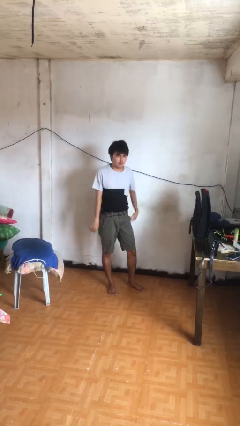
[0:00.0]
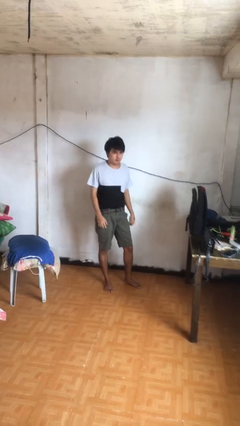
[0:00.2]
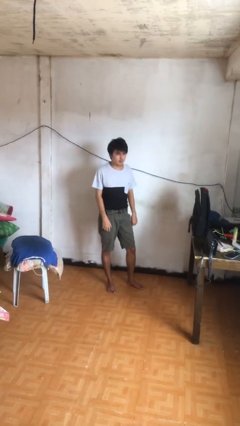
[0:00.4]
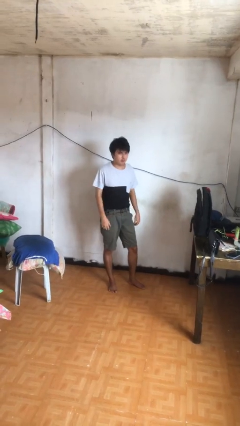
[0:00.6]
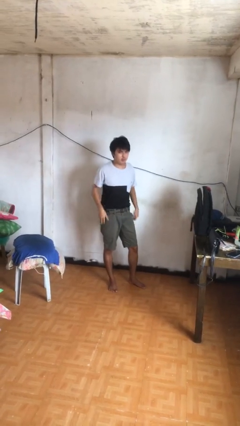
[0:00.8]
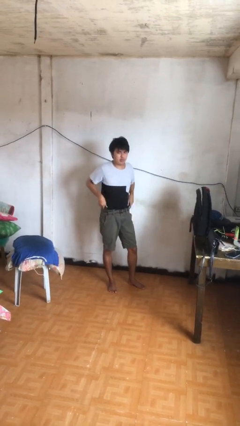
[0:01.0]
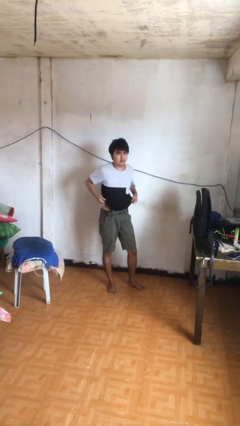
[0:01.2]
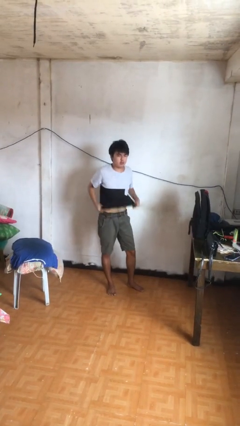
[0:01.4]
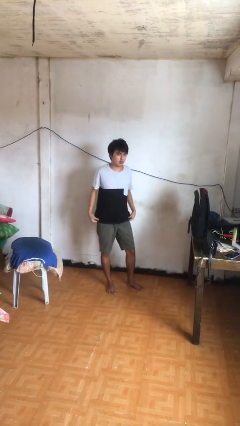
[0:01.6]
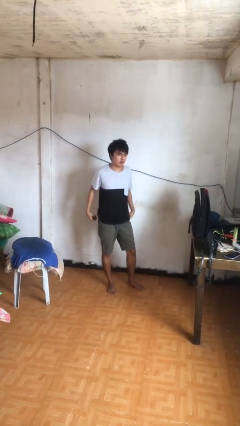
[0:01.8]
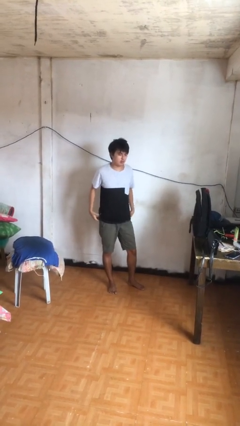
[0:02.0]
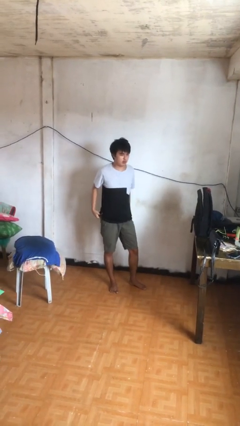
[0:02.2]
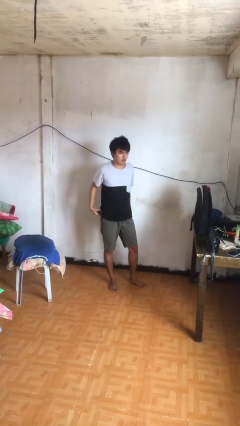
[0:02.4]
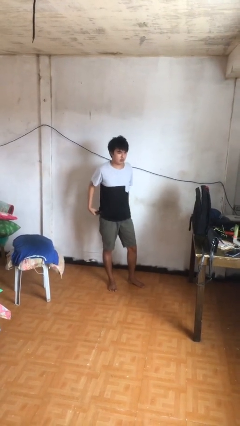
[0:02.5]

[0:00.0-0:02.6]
person untucks shirt

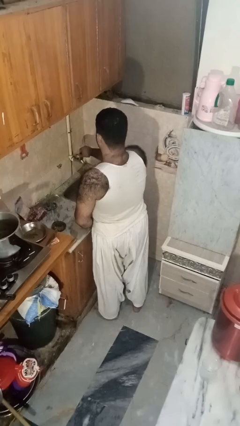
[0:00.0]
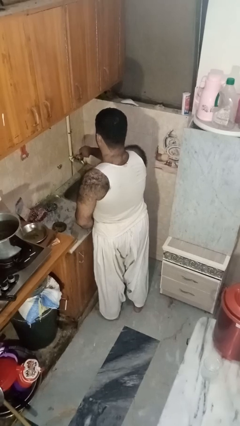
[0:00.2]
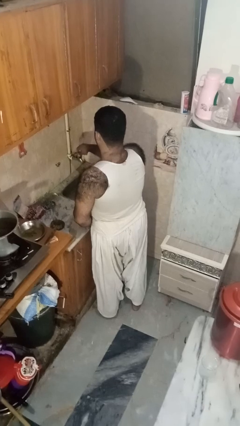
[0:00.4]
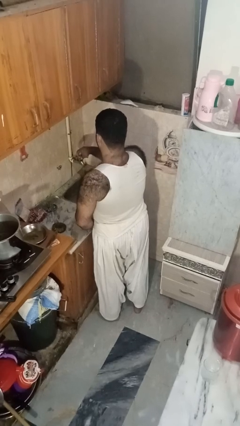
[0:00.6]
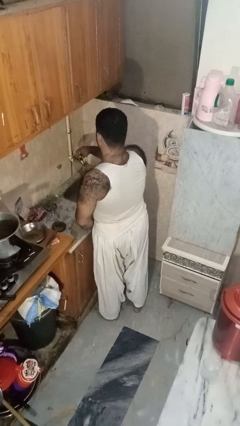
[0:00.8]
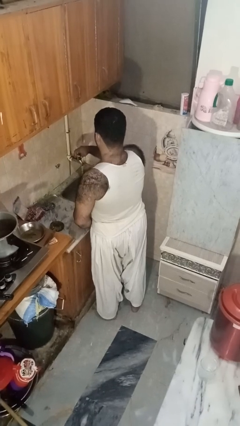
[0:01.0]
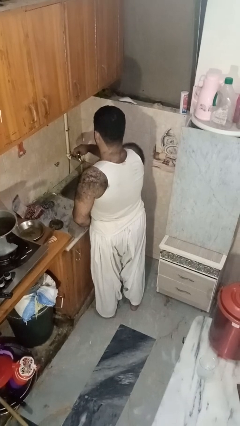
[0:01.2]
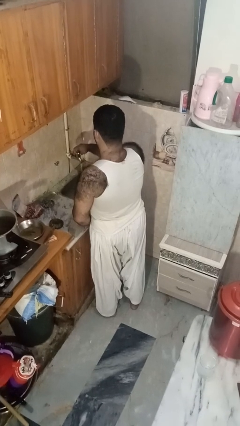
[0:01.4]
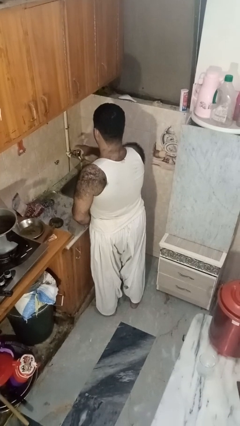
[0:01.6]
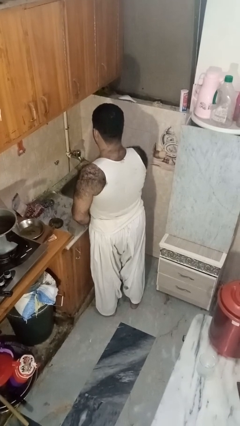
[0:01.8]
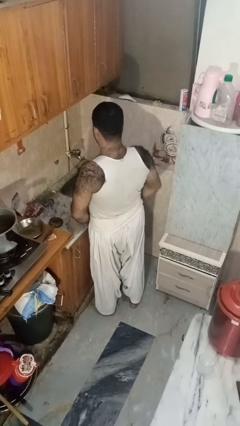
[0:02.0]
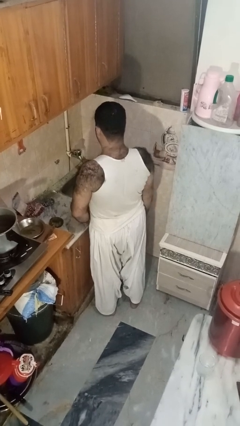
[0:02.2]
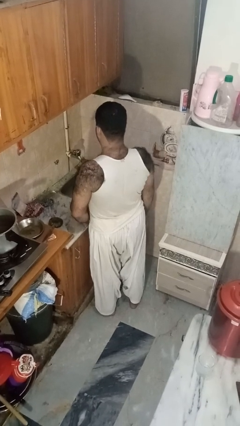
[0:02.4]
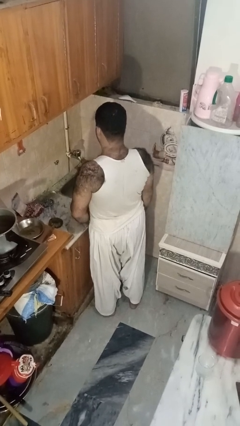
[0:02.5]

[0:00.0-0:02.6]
person turns on faucet

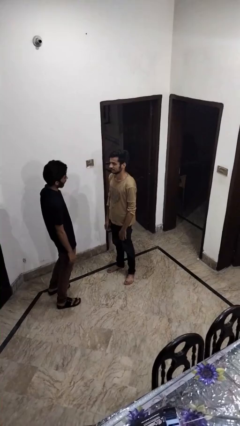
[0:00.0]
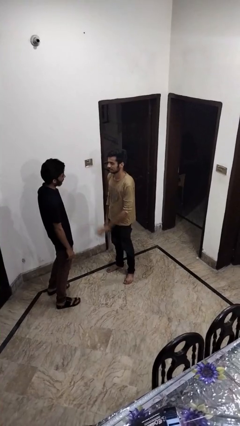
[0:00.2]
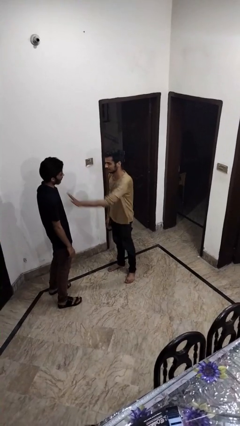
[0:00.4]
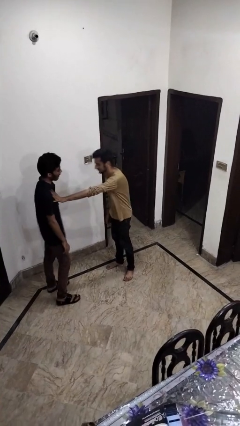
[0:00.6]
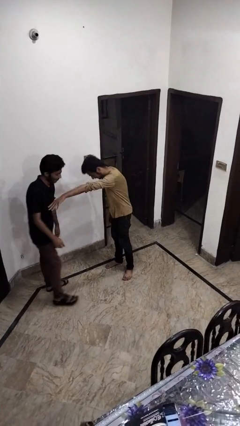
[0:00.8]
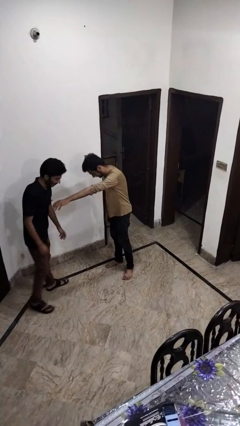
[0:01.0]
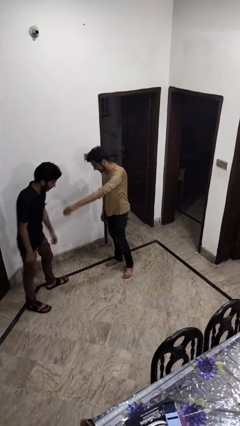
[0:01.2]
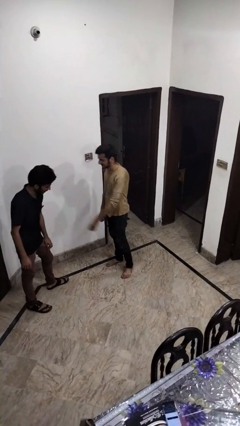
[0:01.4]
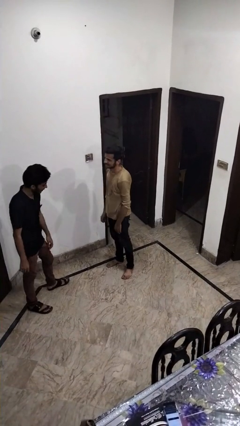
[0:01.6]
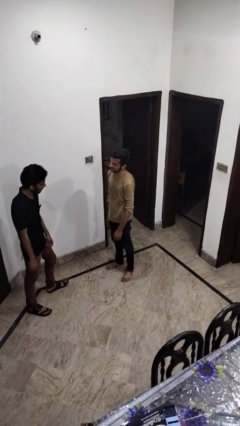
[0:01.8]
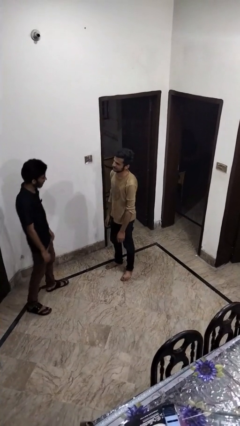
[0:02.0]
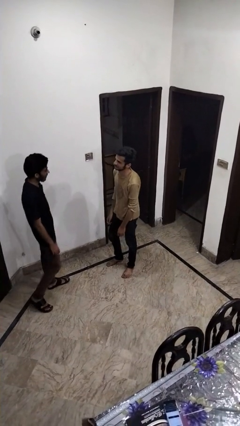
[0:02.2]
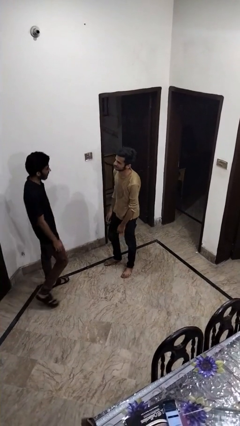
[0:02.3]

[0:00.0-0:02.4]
person shoves person

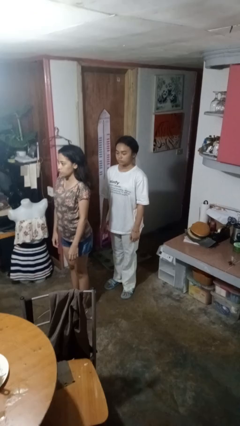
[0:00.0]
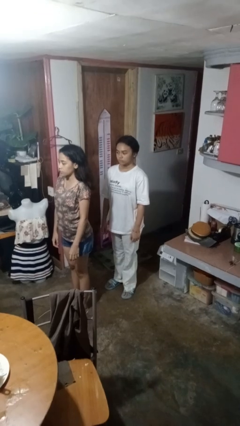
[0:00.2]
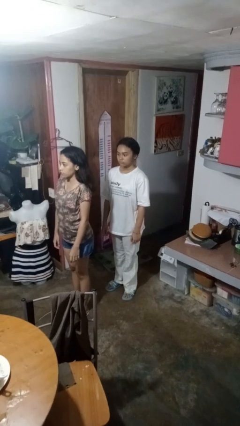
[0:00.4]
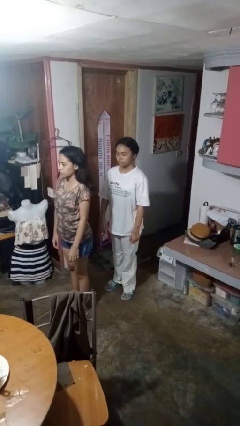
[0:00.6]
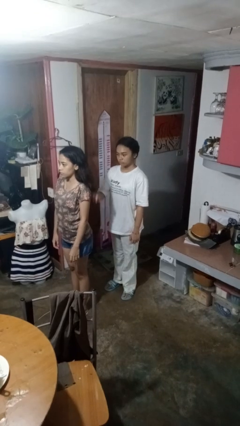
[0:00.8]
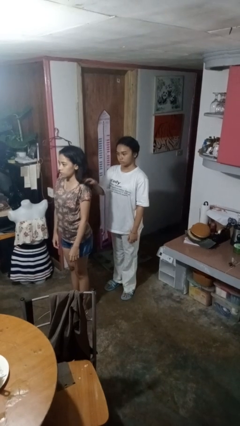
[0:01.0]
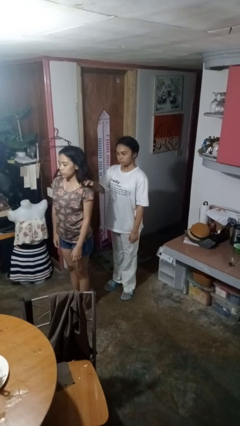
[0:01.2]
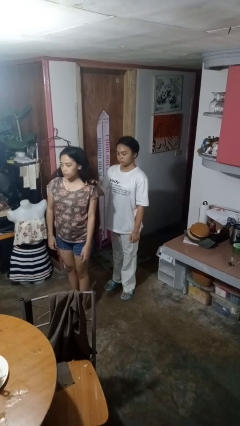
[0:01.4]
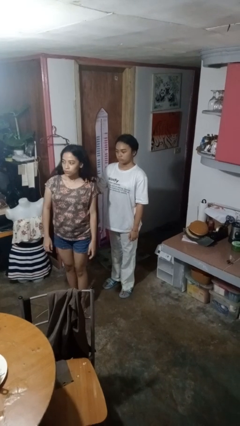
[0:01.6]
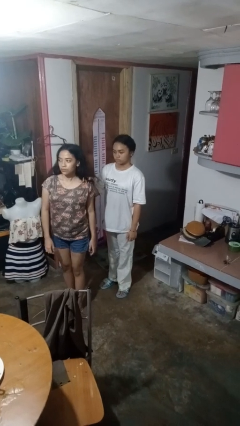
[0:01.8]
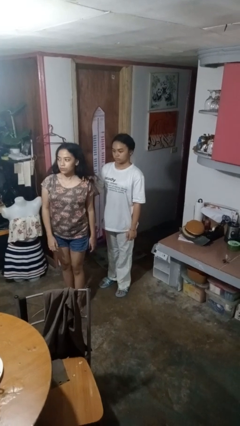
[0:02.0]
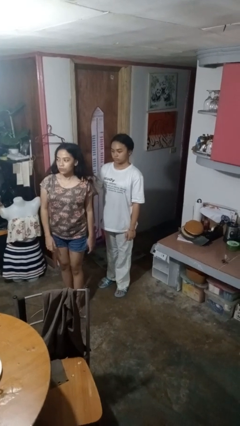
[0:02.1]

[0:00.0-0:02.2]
person grabs person by shoulder

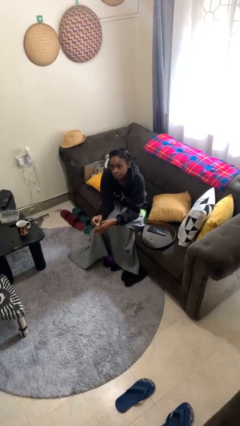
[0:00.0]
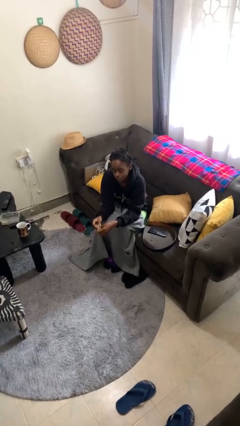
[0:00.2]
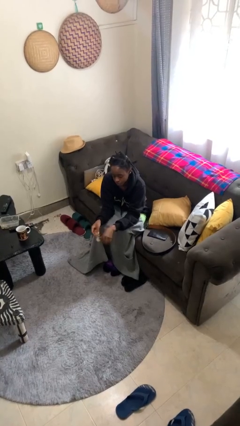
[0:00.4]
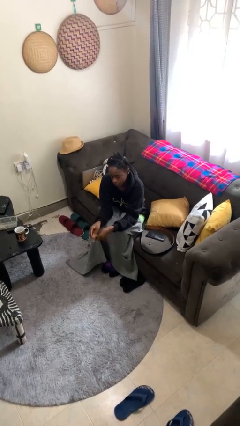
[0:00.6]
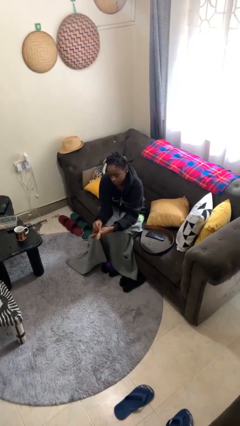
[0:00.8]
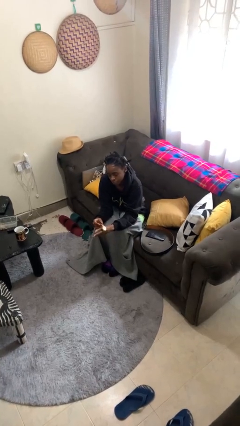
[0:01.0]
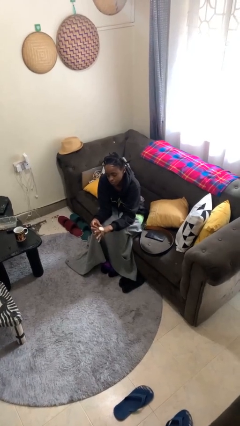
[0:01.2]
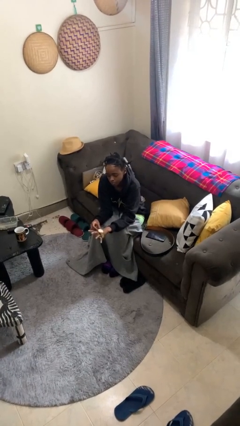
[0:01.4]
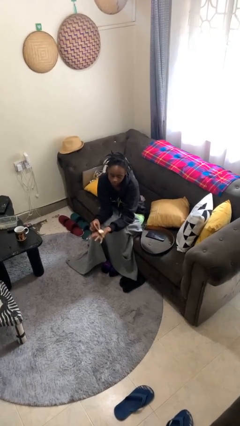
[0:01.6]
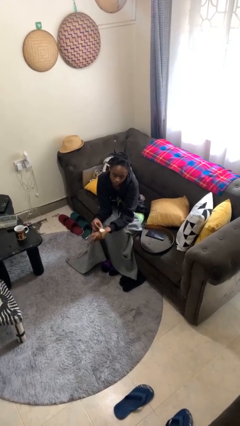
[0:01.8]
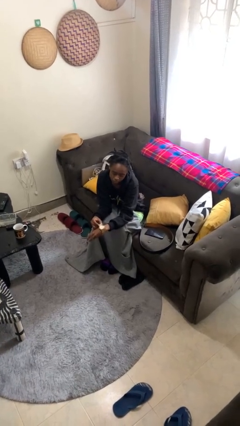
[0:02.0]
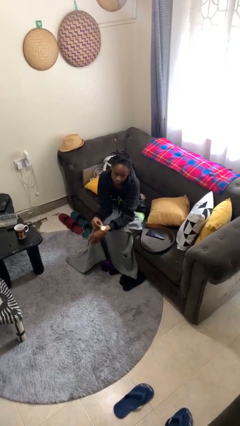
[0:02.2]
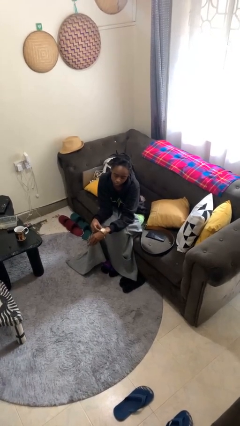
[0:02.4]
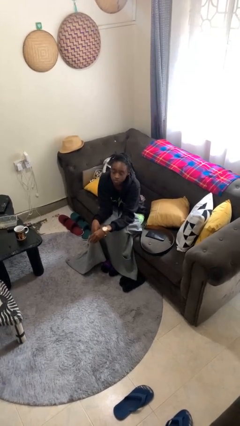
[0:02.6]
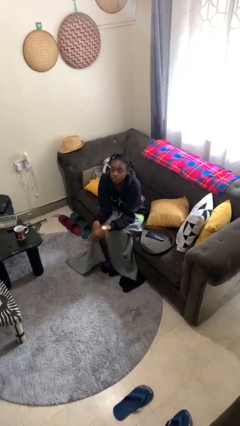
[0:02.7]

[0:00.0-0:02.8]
person puts on wristwatch

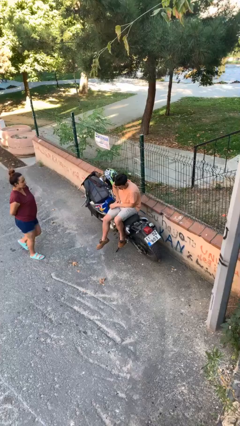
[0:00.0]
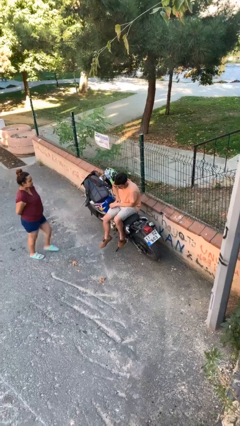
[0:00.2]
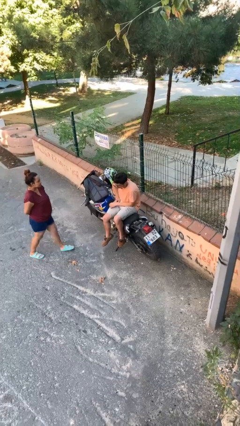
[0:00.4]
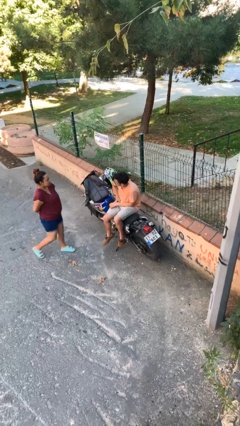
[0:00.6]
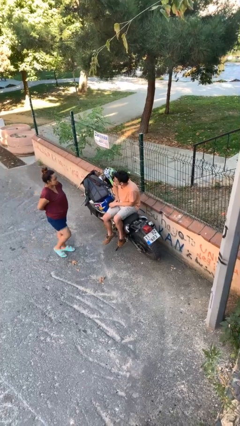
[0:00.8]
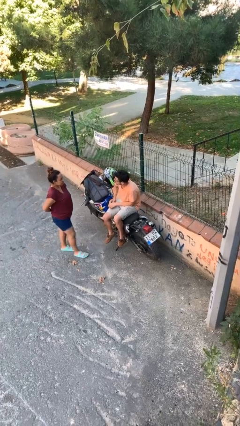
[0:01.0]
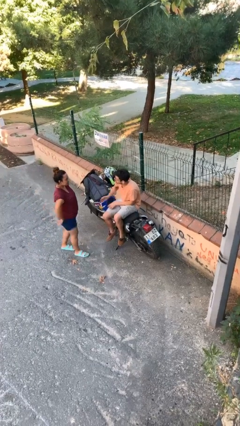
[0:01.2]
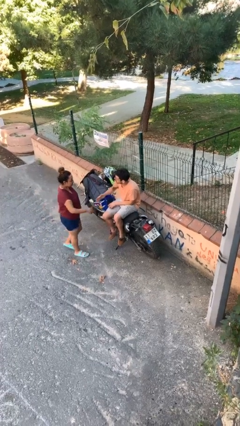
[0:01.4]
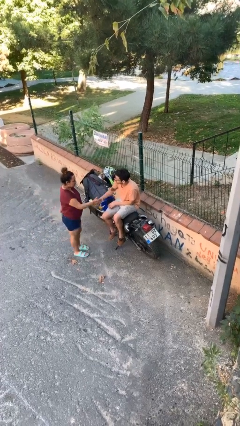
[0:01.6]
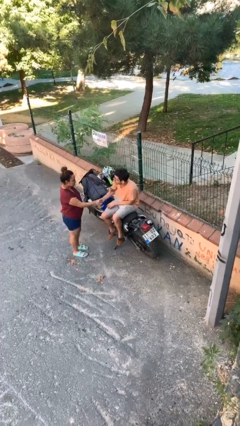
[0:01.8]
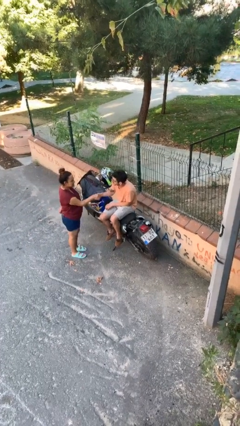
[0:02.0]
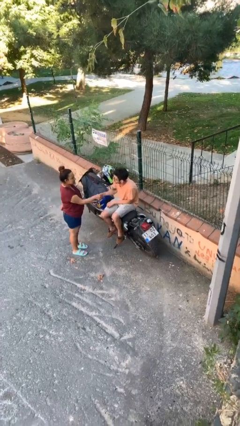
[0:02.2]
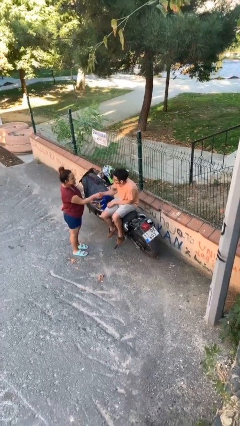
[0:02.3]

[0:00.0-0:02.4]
person shakes hand

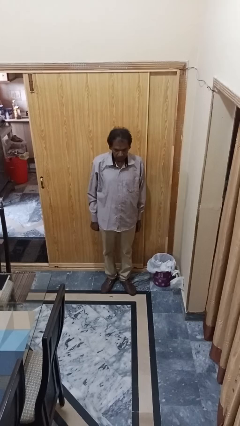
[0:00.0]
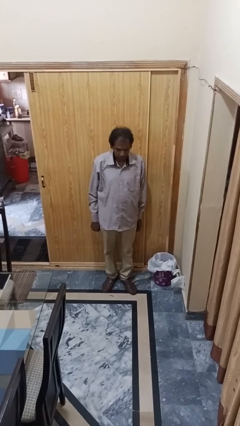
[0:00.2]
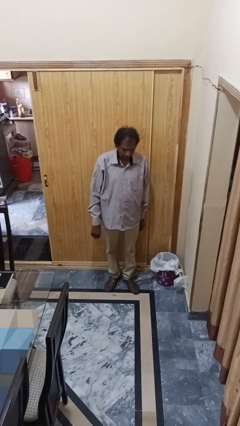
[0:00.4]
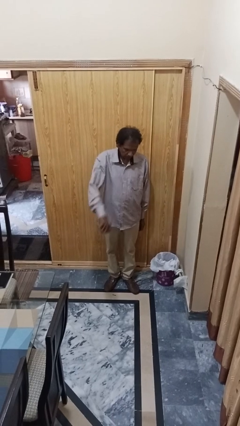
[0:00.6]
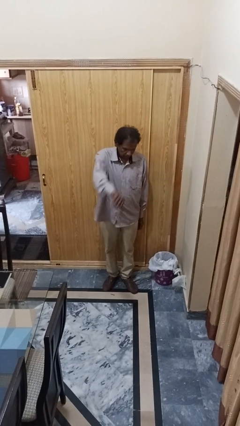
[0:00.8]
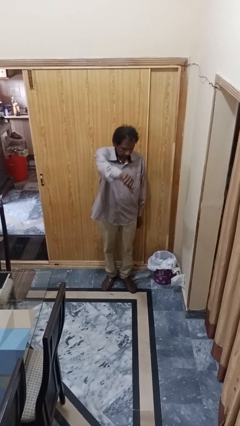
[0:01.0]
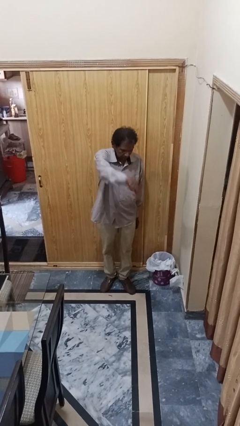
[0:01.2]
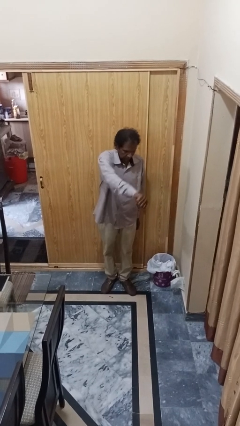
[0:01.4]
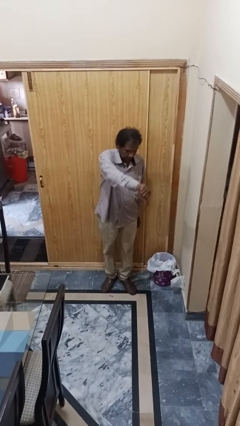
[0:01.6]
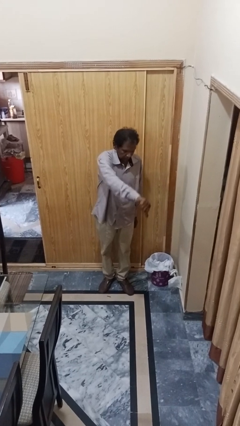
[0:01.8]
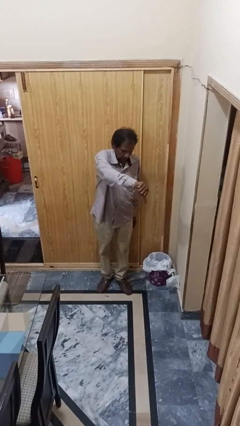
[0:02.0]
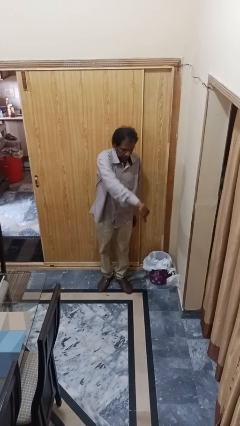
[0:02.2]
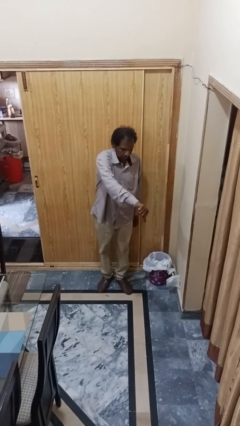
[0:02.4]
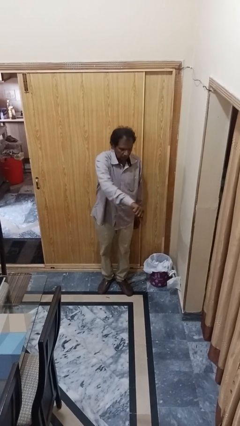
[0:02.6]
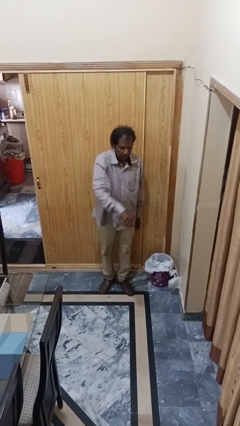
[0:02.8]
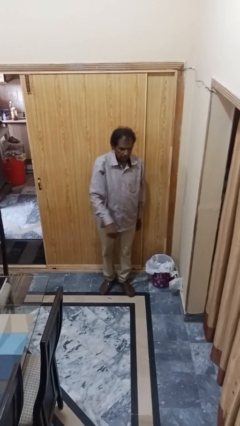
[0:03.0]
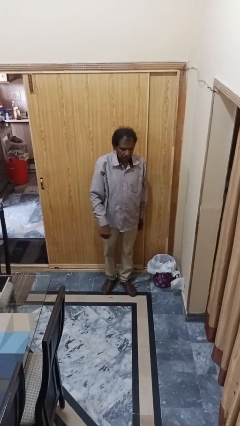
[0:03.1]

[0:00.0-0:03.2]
person gestures thumbs down
